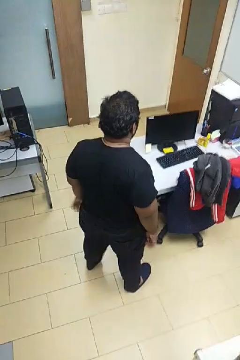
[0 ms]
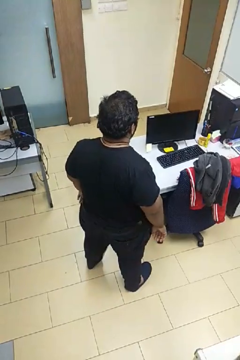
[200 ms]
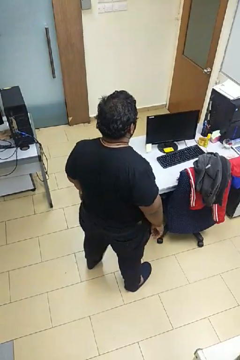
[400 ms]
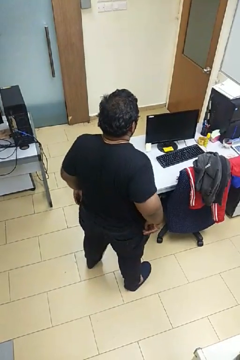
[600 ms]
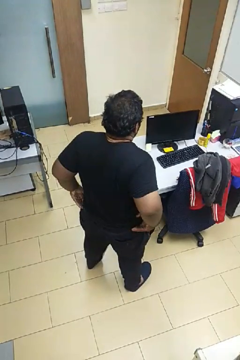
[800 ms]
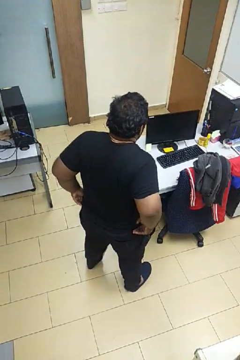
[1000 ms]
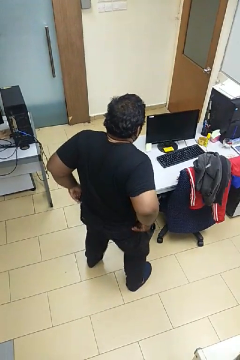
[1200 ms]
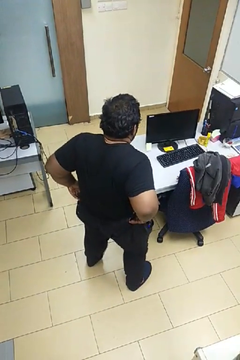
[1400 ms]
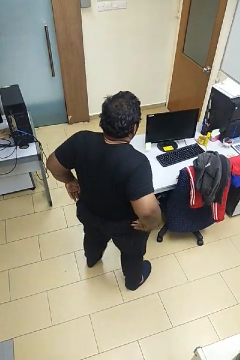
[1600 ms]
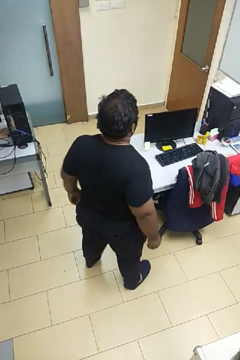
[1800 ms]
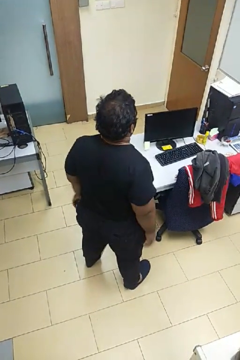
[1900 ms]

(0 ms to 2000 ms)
person hikes up pants

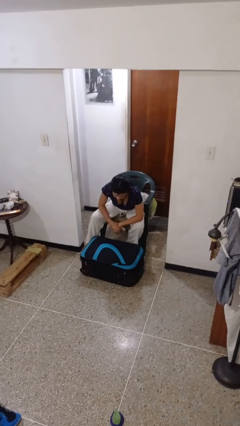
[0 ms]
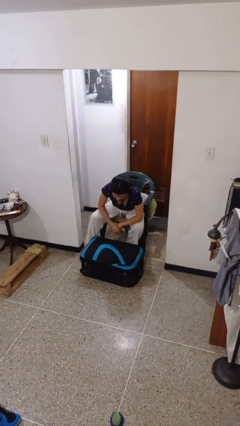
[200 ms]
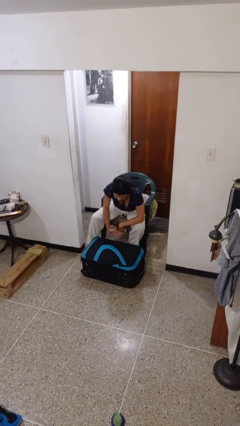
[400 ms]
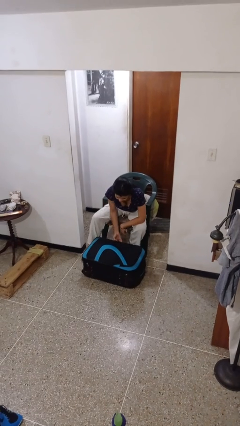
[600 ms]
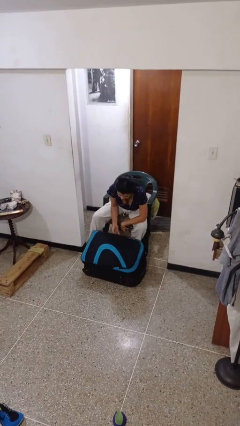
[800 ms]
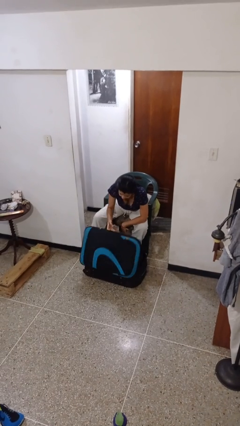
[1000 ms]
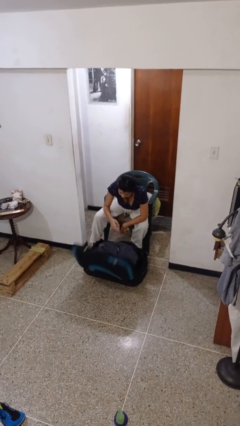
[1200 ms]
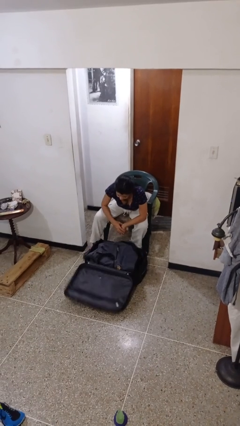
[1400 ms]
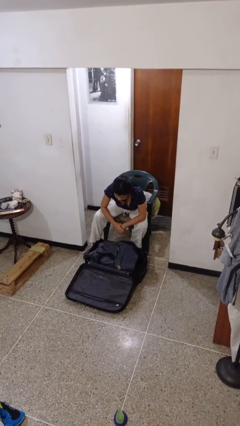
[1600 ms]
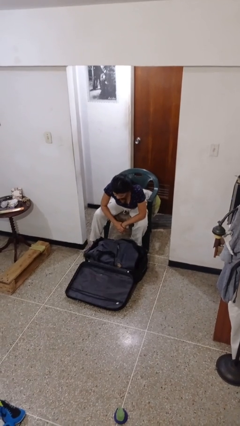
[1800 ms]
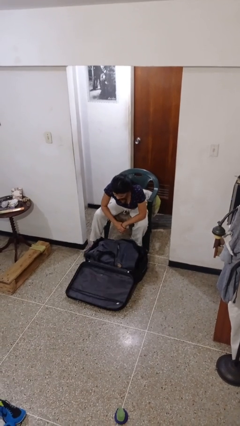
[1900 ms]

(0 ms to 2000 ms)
person opens suitcase

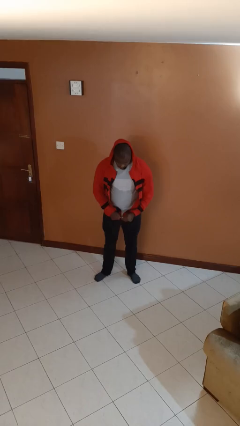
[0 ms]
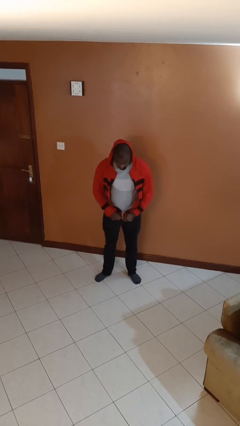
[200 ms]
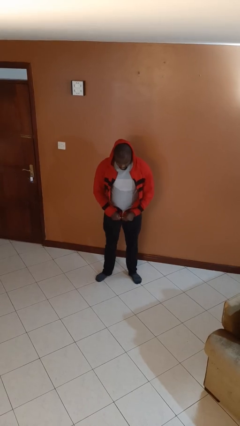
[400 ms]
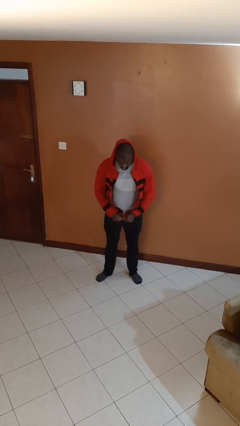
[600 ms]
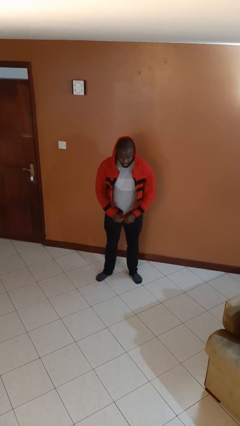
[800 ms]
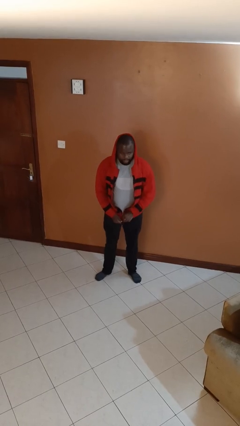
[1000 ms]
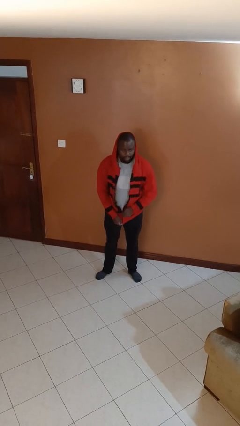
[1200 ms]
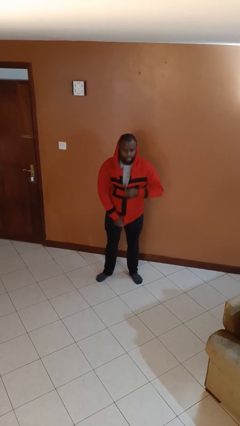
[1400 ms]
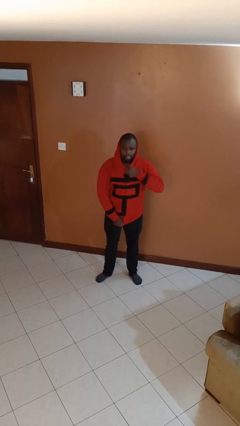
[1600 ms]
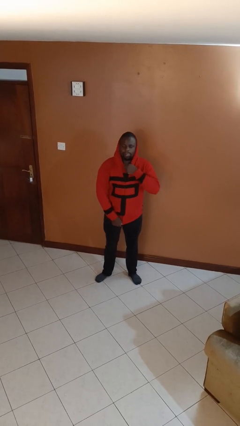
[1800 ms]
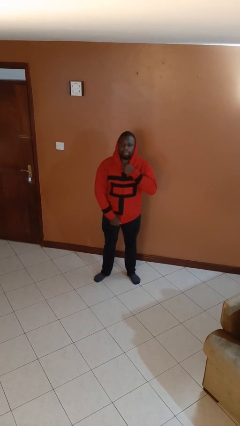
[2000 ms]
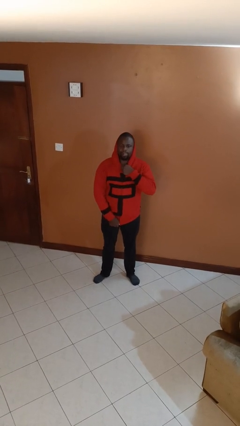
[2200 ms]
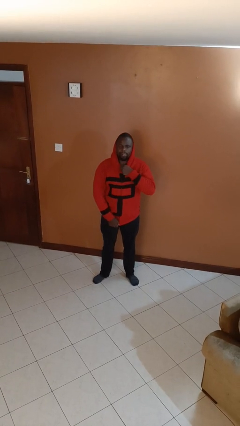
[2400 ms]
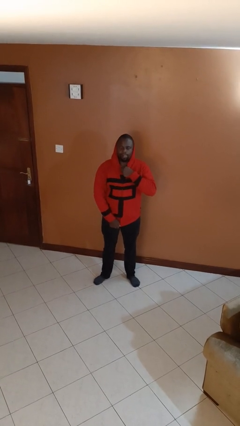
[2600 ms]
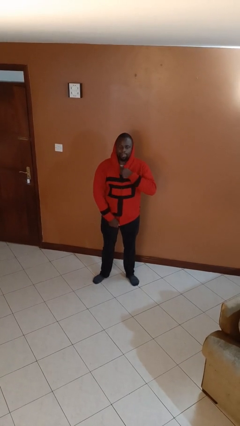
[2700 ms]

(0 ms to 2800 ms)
person zips up jacket

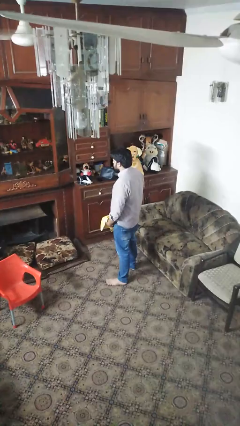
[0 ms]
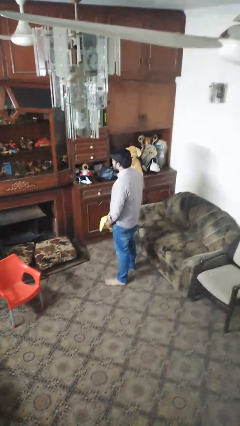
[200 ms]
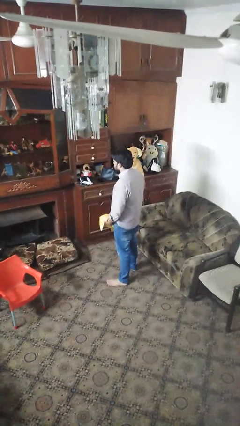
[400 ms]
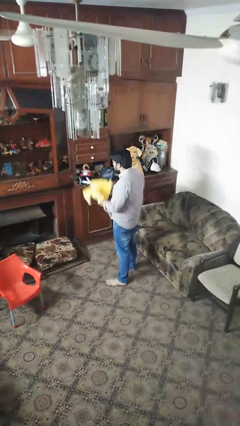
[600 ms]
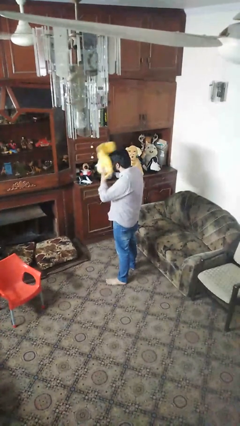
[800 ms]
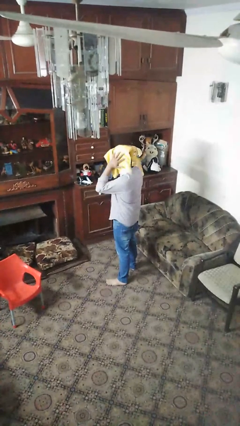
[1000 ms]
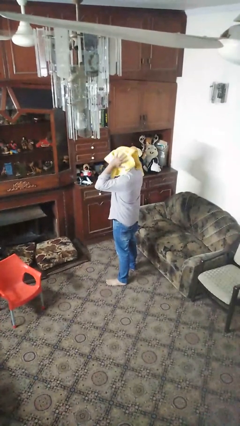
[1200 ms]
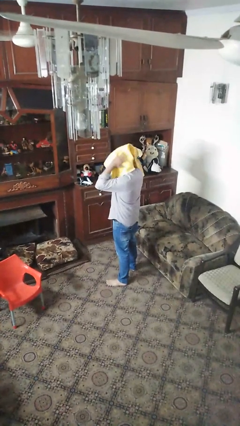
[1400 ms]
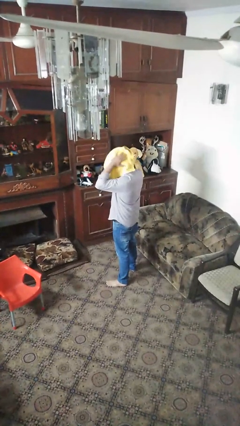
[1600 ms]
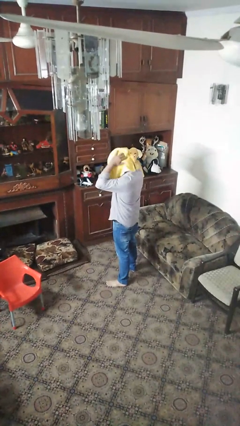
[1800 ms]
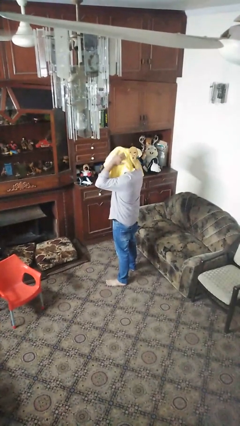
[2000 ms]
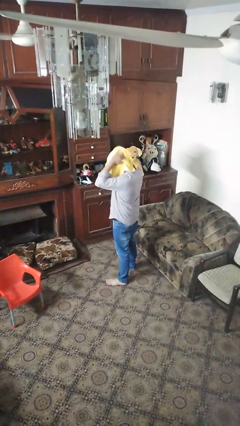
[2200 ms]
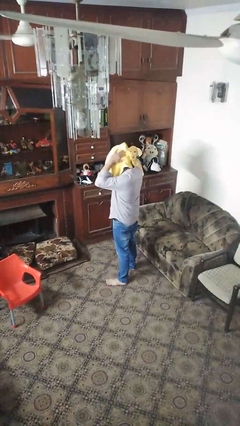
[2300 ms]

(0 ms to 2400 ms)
person dries hair with towel

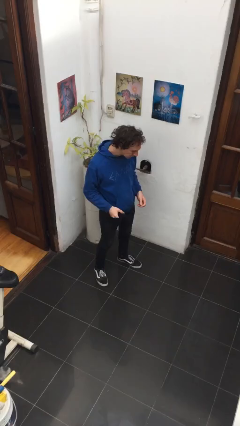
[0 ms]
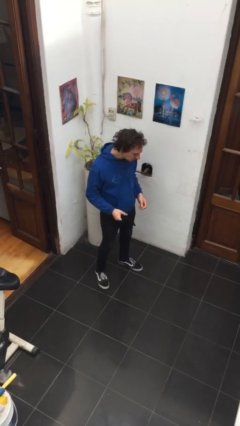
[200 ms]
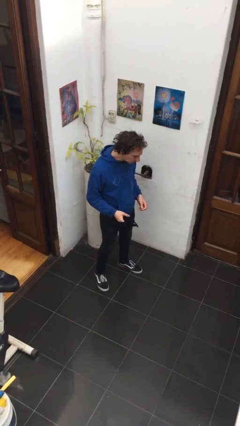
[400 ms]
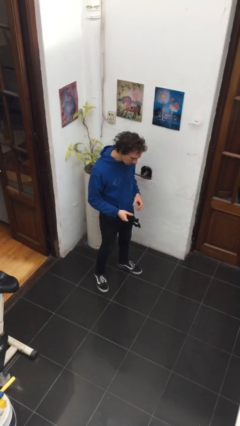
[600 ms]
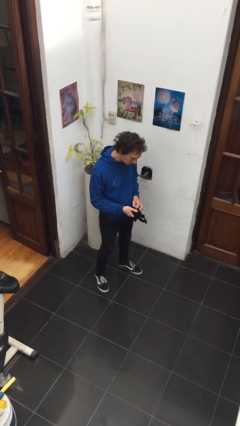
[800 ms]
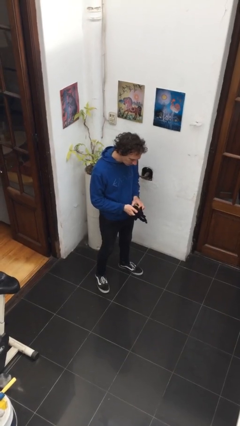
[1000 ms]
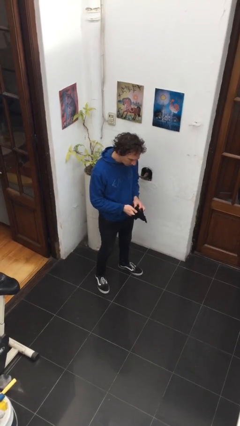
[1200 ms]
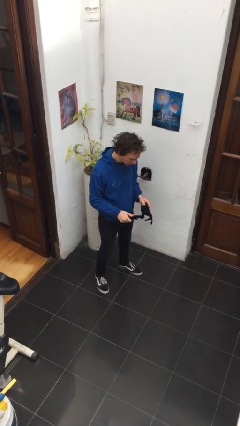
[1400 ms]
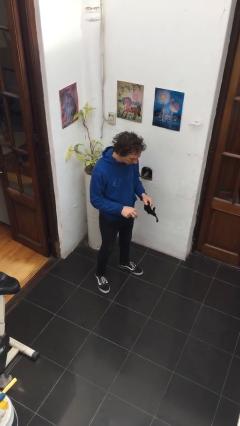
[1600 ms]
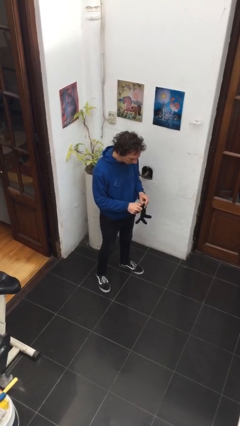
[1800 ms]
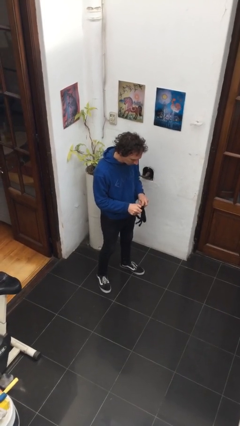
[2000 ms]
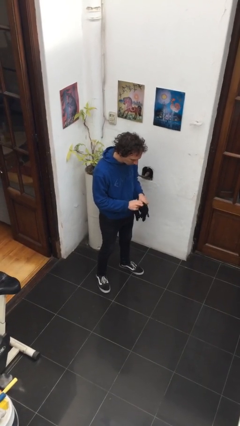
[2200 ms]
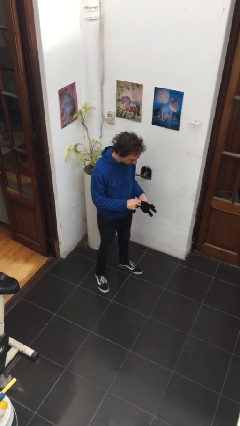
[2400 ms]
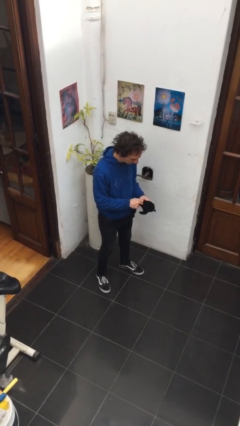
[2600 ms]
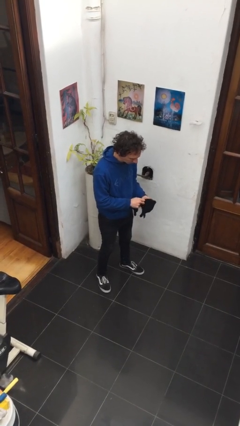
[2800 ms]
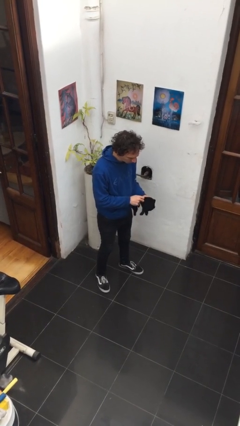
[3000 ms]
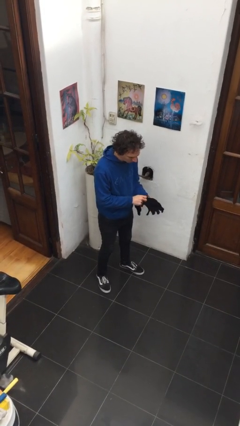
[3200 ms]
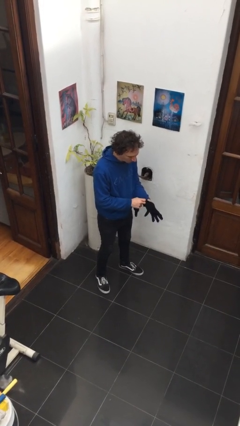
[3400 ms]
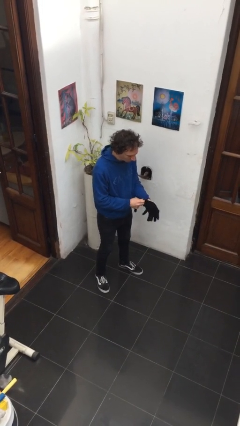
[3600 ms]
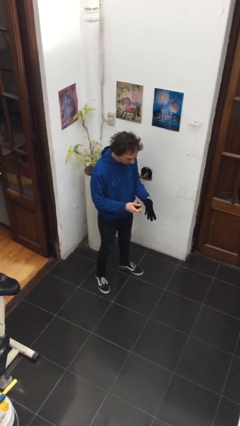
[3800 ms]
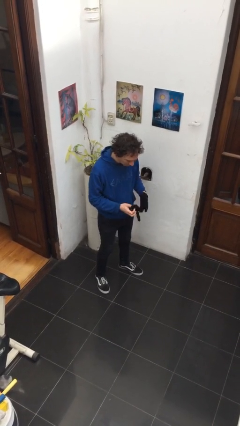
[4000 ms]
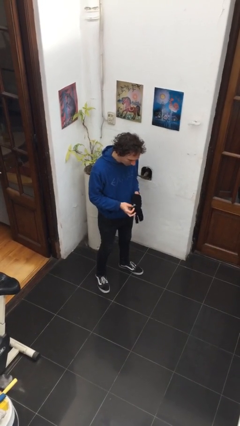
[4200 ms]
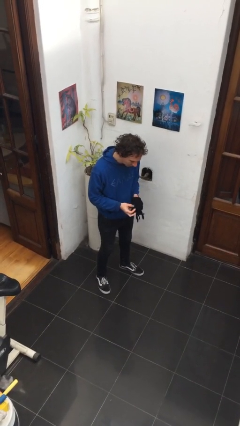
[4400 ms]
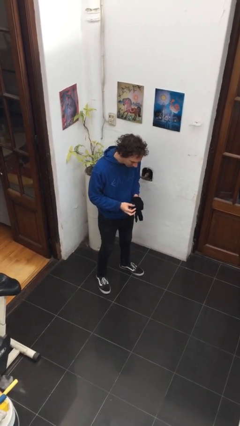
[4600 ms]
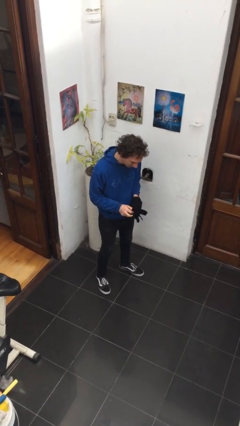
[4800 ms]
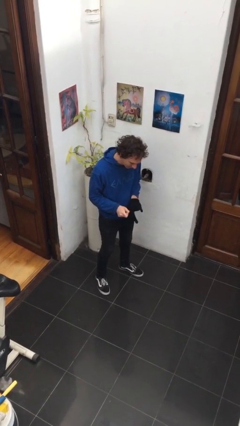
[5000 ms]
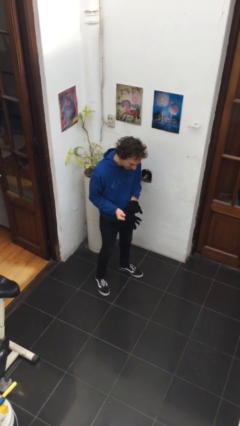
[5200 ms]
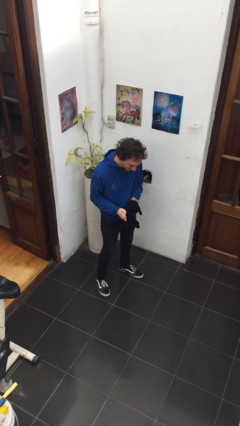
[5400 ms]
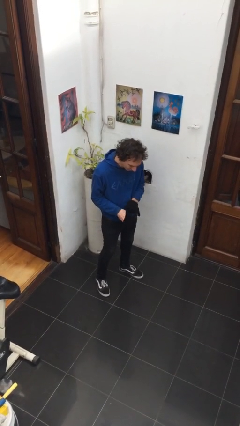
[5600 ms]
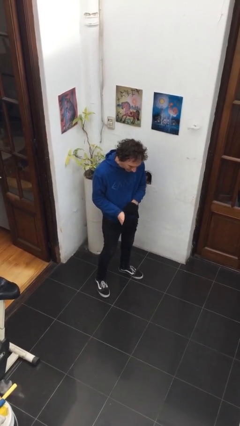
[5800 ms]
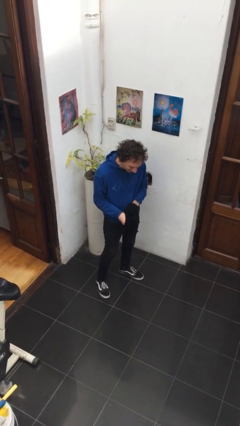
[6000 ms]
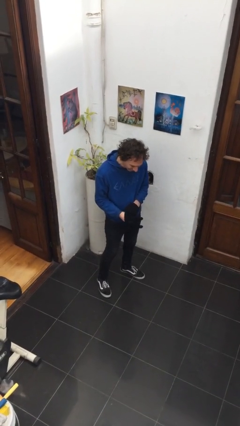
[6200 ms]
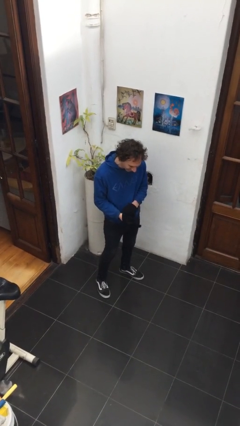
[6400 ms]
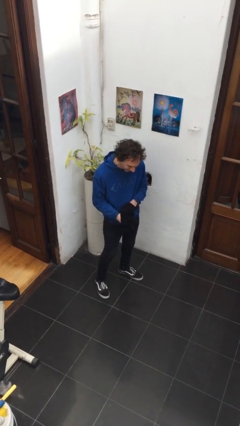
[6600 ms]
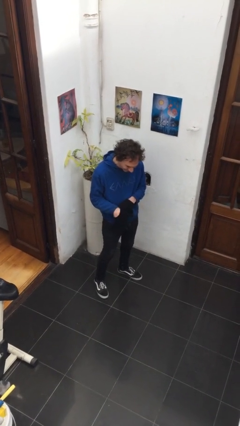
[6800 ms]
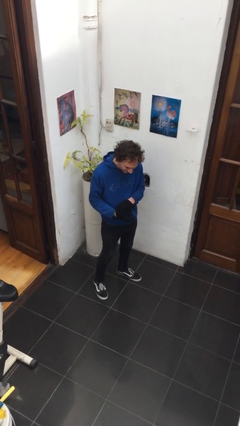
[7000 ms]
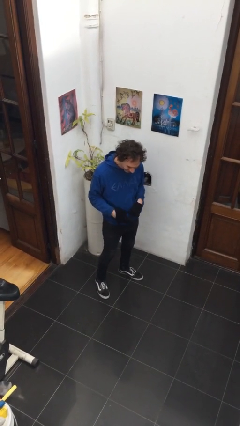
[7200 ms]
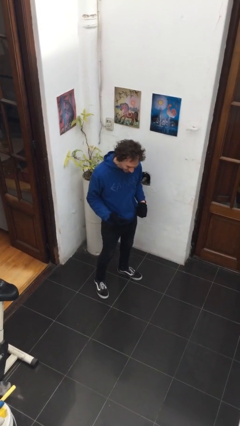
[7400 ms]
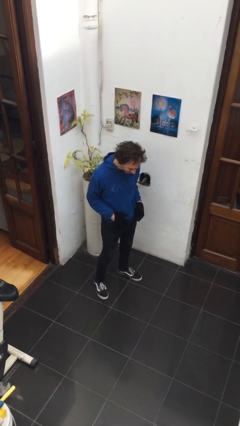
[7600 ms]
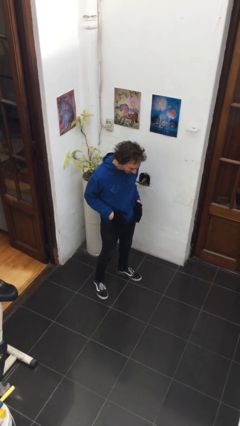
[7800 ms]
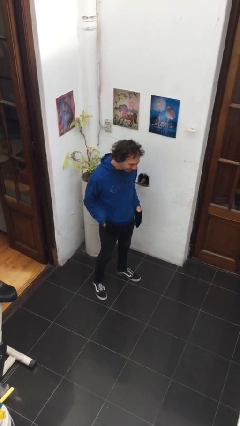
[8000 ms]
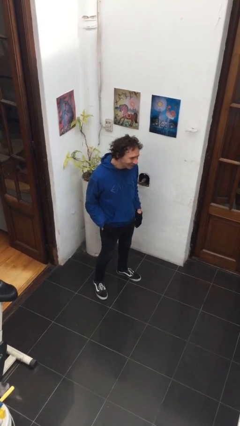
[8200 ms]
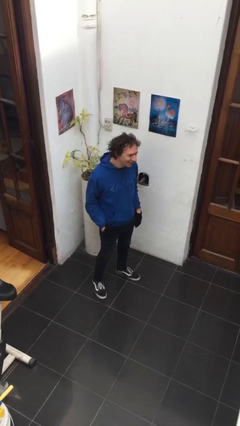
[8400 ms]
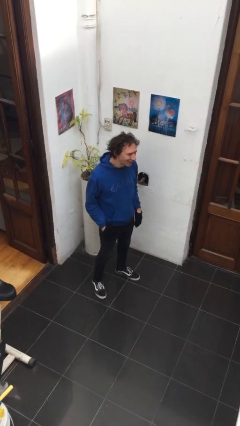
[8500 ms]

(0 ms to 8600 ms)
person puts on gloves
